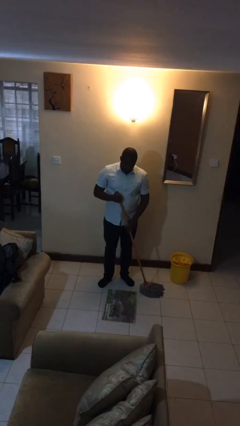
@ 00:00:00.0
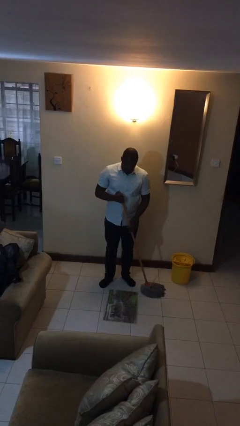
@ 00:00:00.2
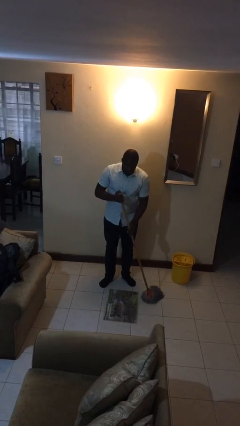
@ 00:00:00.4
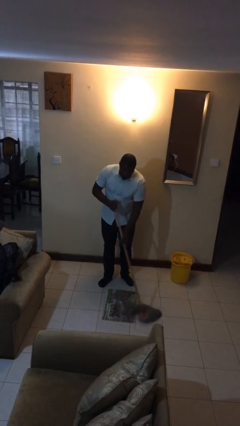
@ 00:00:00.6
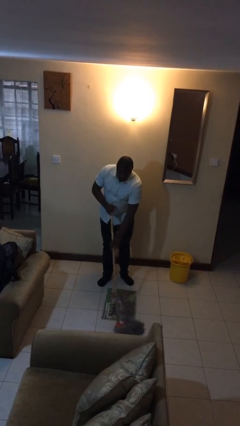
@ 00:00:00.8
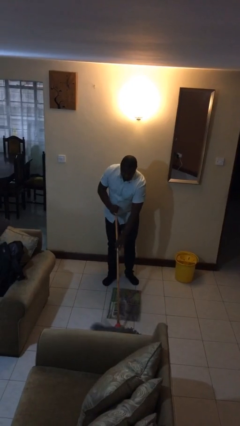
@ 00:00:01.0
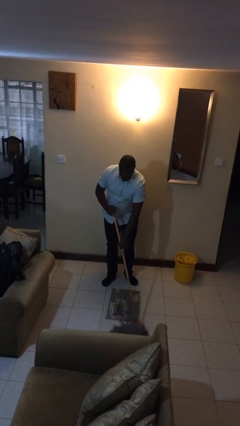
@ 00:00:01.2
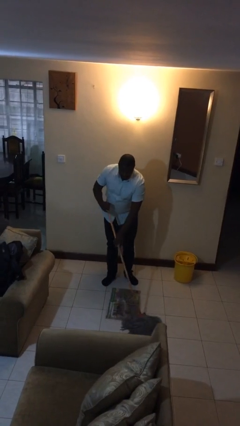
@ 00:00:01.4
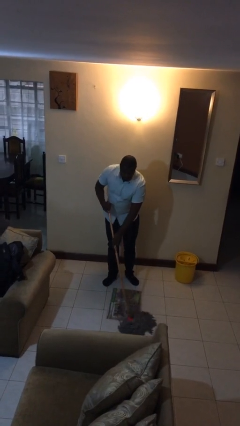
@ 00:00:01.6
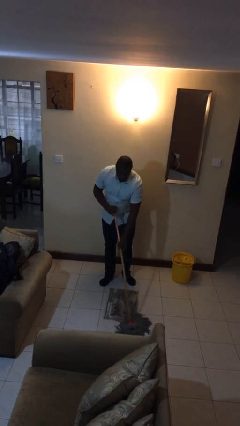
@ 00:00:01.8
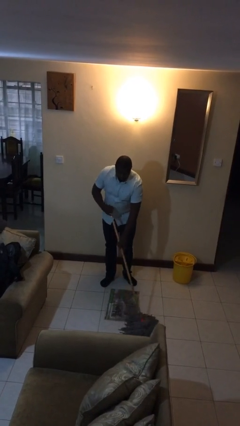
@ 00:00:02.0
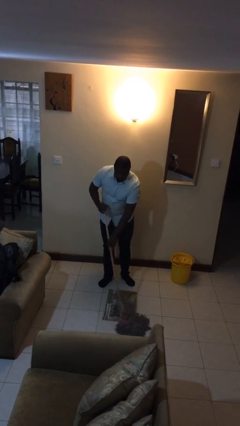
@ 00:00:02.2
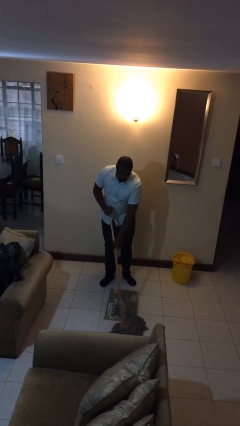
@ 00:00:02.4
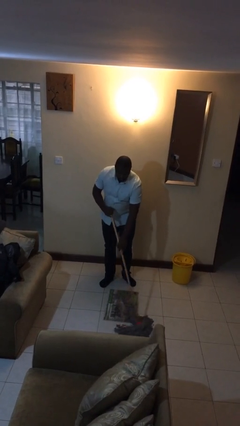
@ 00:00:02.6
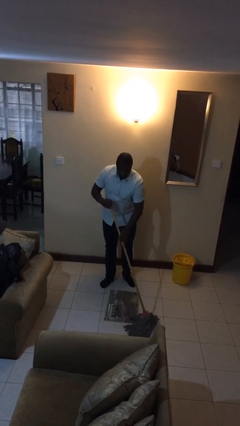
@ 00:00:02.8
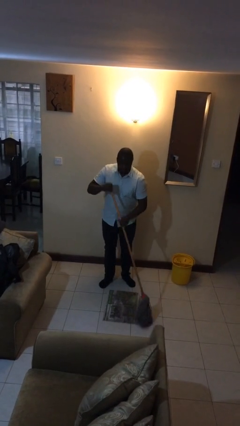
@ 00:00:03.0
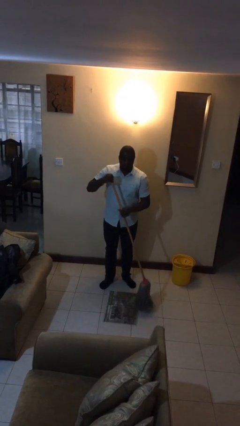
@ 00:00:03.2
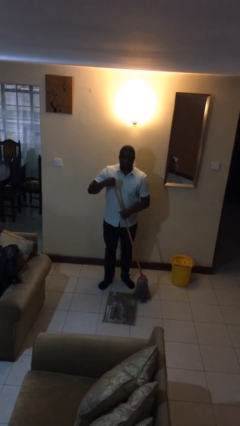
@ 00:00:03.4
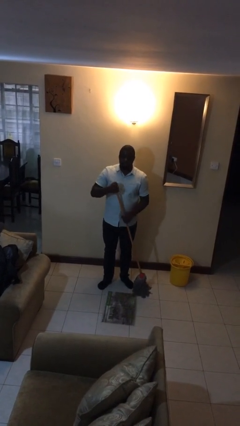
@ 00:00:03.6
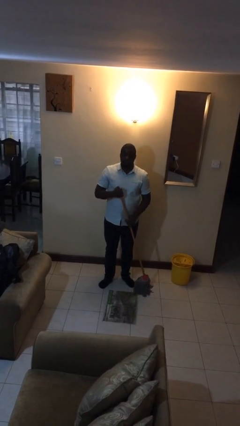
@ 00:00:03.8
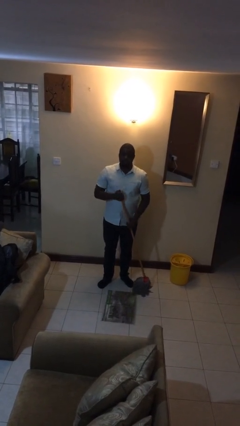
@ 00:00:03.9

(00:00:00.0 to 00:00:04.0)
person mops

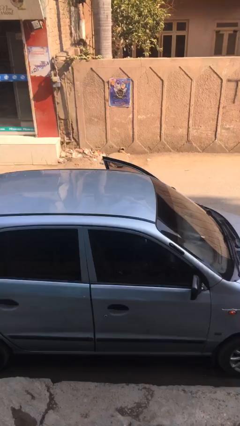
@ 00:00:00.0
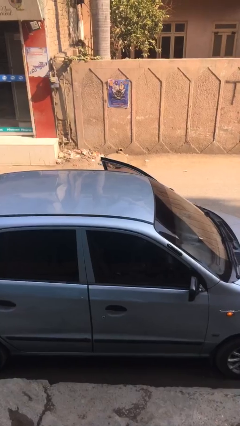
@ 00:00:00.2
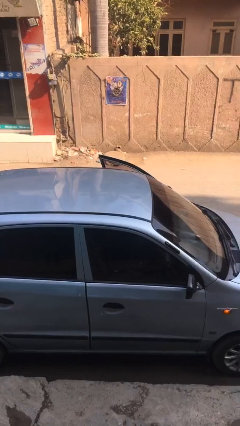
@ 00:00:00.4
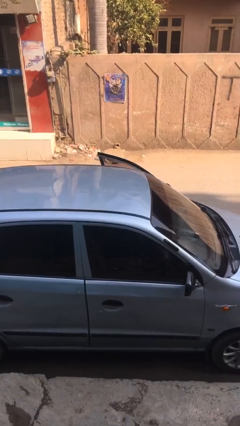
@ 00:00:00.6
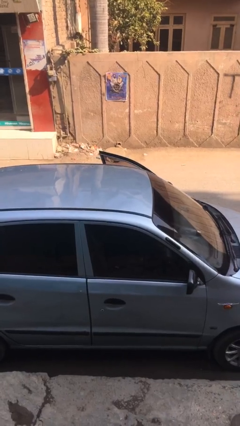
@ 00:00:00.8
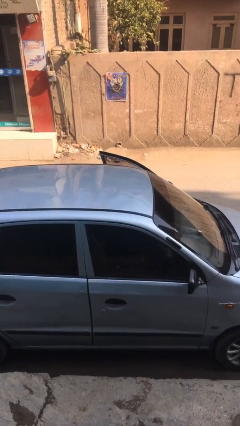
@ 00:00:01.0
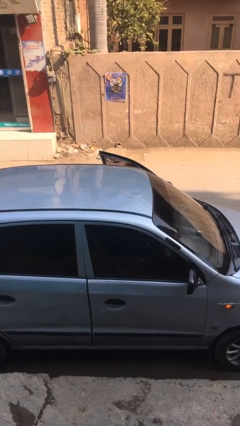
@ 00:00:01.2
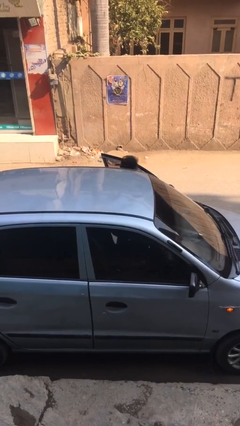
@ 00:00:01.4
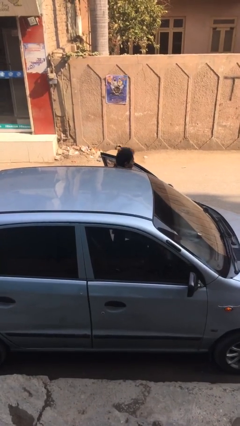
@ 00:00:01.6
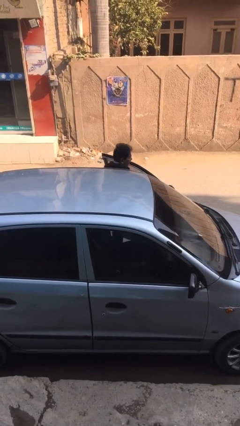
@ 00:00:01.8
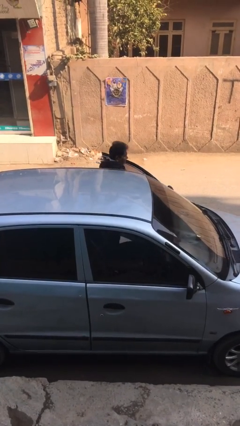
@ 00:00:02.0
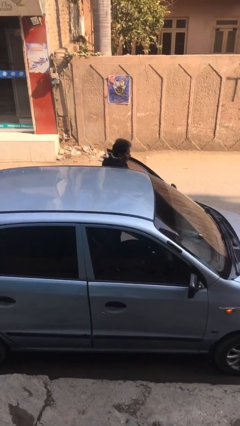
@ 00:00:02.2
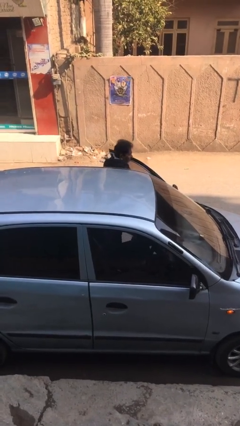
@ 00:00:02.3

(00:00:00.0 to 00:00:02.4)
person exits car

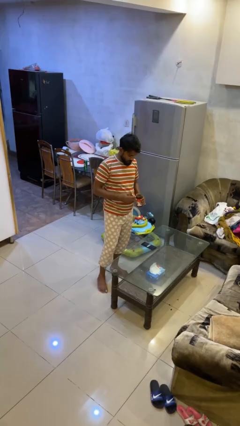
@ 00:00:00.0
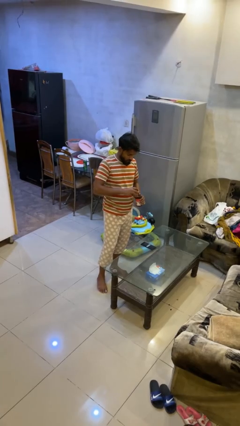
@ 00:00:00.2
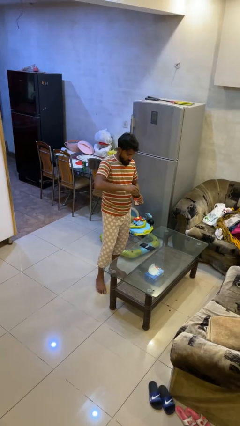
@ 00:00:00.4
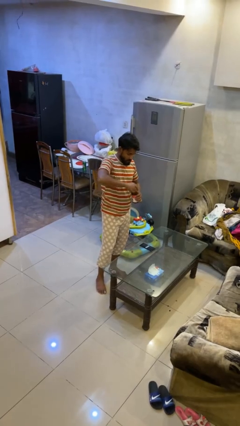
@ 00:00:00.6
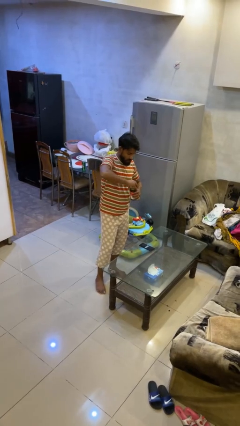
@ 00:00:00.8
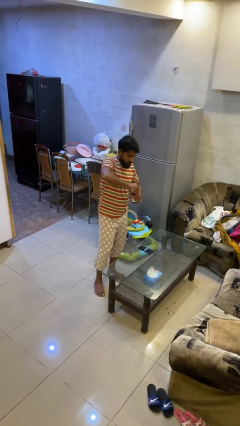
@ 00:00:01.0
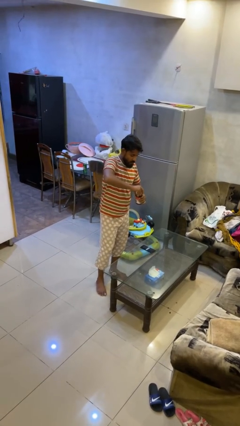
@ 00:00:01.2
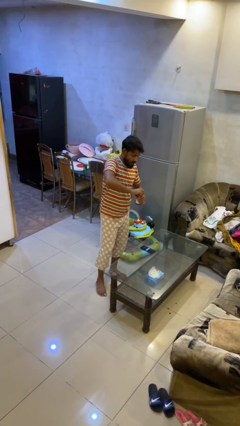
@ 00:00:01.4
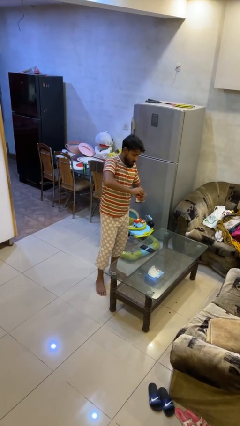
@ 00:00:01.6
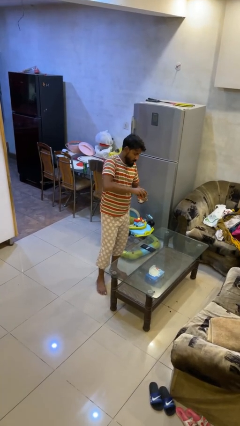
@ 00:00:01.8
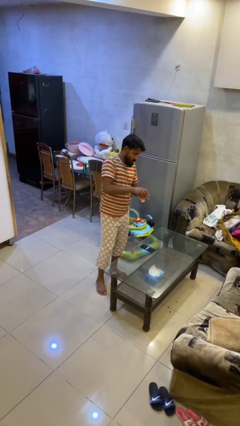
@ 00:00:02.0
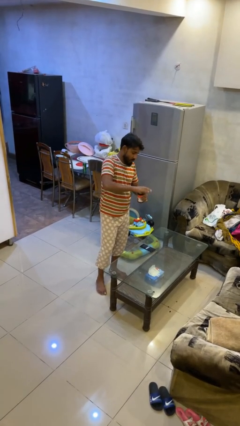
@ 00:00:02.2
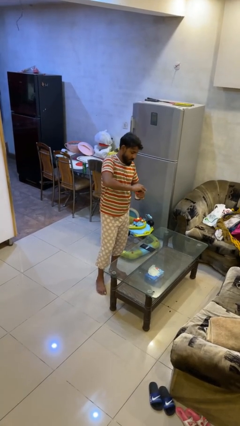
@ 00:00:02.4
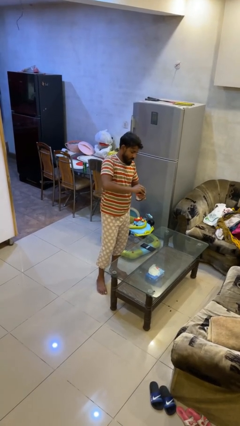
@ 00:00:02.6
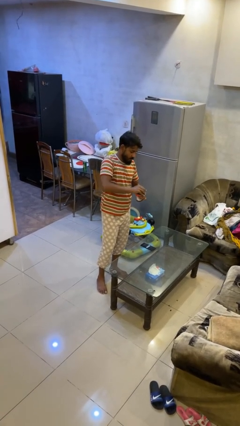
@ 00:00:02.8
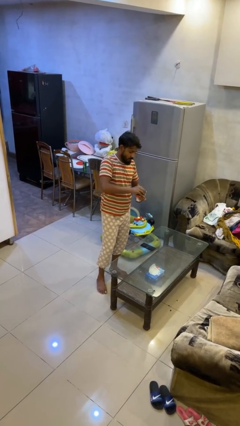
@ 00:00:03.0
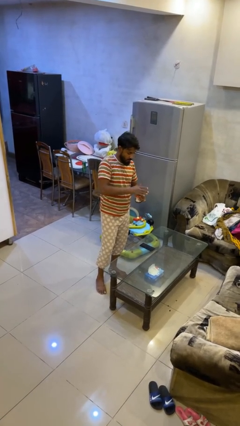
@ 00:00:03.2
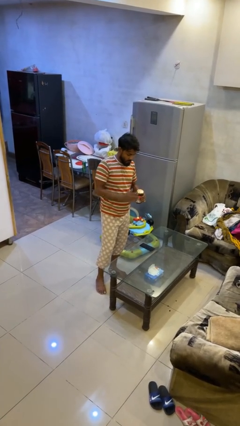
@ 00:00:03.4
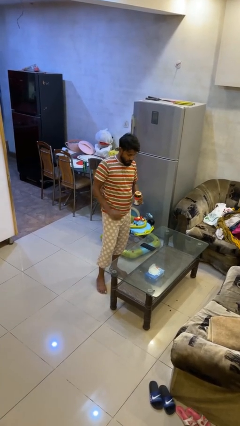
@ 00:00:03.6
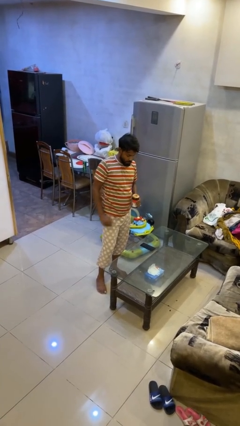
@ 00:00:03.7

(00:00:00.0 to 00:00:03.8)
person closes jar

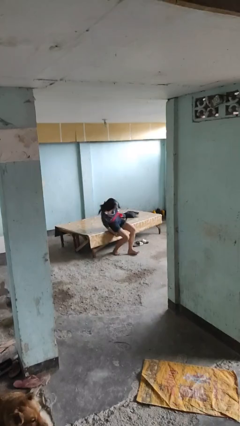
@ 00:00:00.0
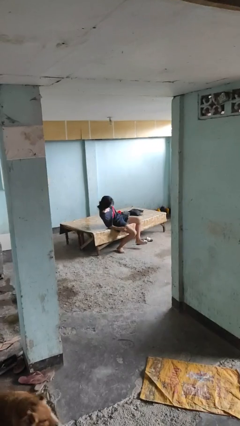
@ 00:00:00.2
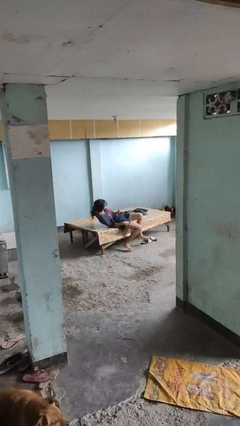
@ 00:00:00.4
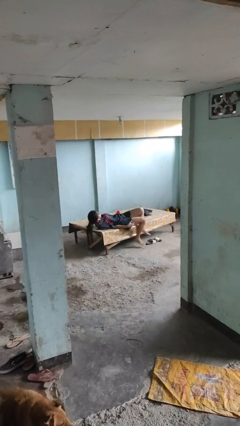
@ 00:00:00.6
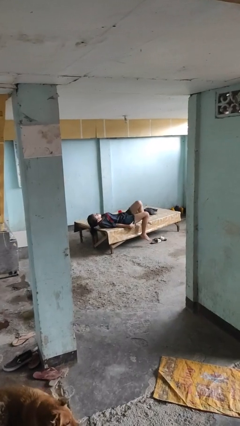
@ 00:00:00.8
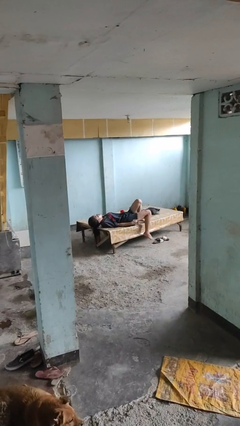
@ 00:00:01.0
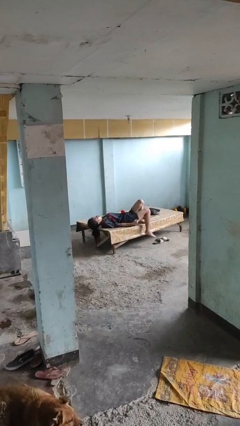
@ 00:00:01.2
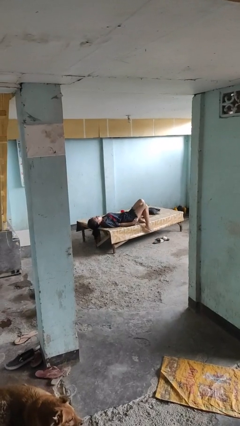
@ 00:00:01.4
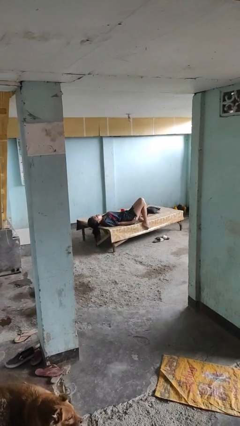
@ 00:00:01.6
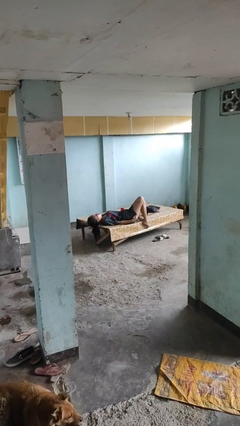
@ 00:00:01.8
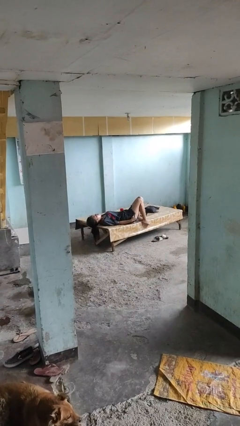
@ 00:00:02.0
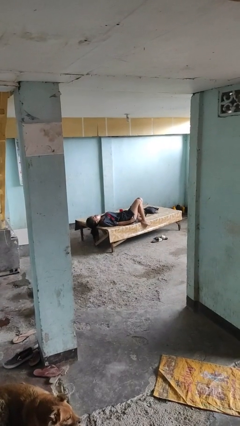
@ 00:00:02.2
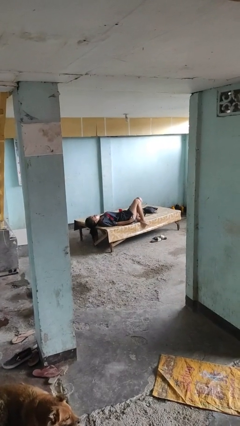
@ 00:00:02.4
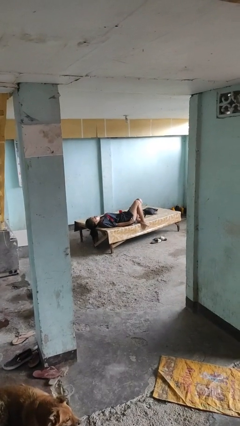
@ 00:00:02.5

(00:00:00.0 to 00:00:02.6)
person lies down on bed

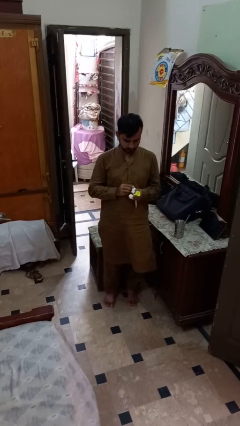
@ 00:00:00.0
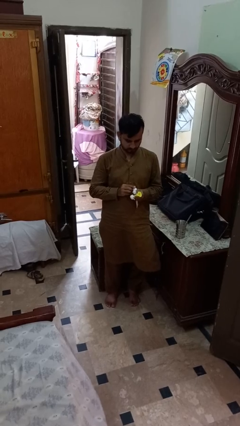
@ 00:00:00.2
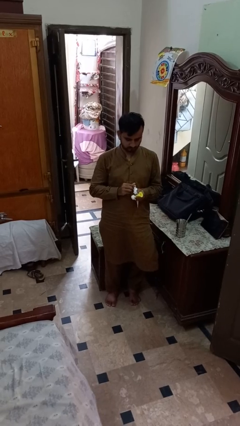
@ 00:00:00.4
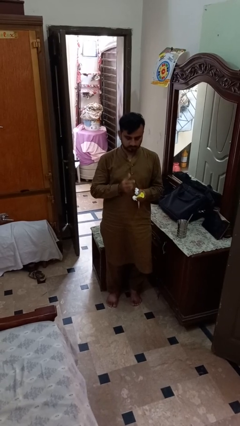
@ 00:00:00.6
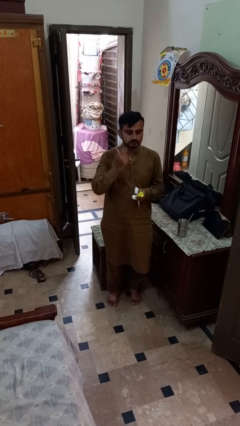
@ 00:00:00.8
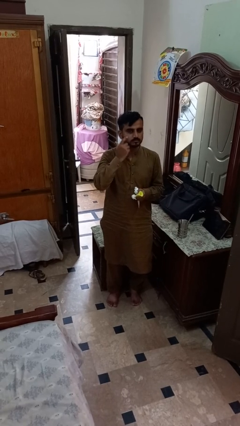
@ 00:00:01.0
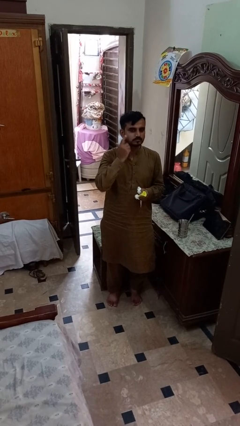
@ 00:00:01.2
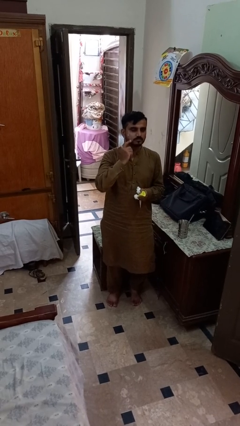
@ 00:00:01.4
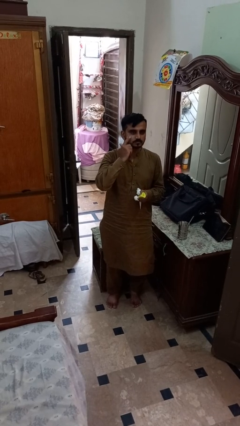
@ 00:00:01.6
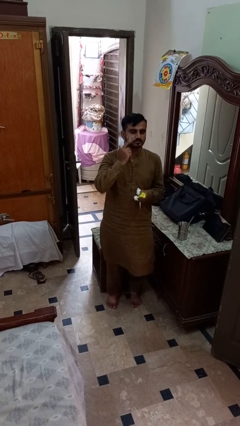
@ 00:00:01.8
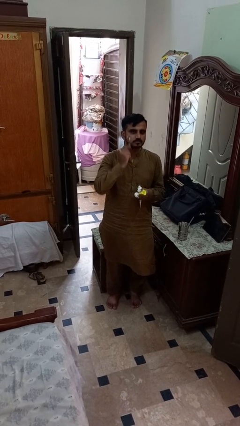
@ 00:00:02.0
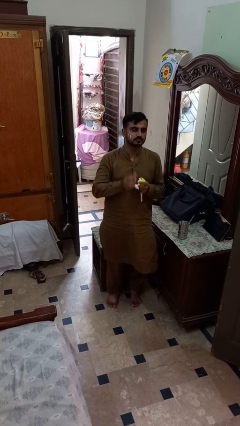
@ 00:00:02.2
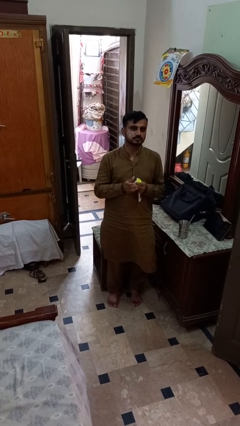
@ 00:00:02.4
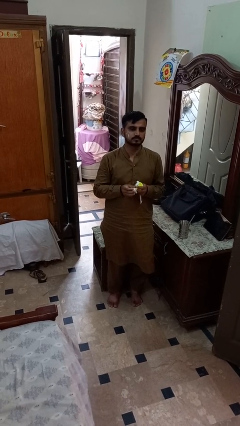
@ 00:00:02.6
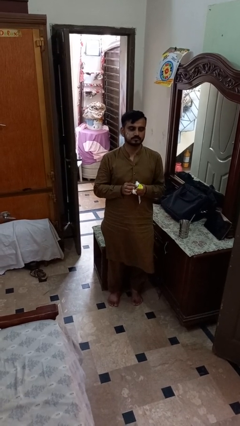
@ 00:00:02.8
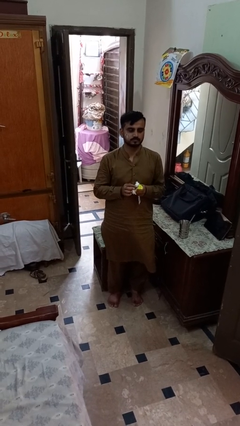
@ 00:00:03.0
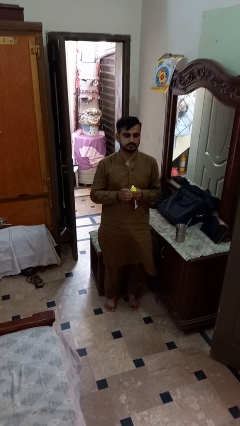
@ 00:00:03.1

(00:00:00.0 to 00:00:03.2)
person applies shaving cream

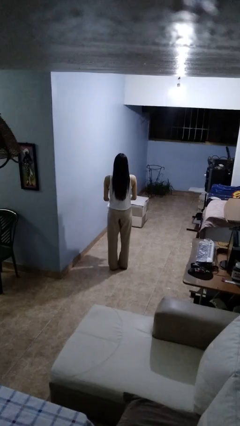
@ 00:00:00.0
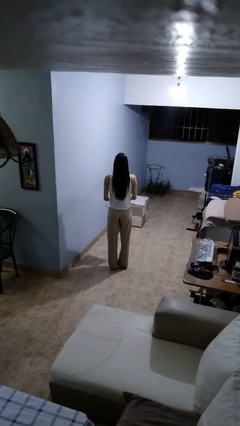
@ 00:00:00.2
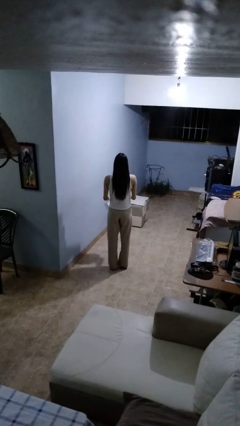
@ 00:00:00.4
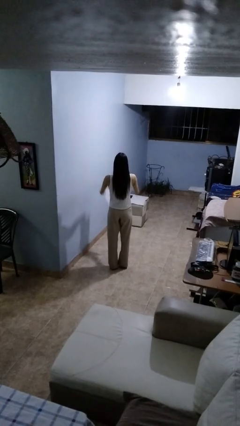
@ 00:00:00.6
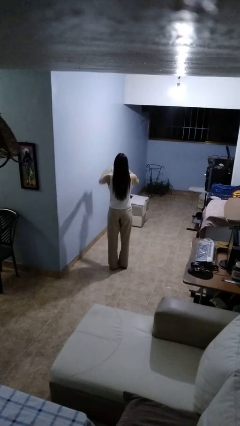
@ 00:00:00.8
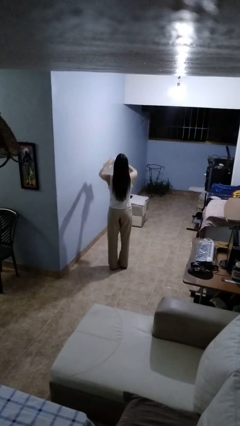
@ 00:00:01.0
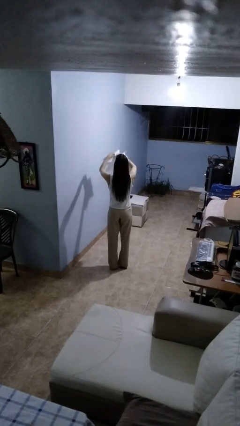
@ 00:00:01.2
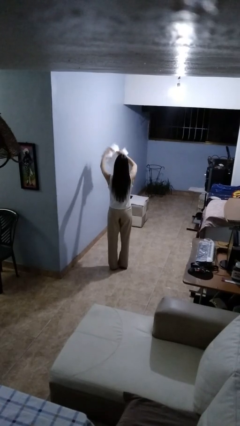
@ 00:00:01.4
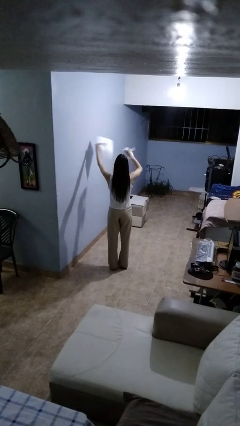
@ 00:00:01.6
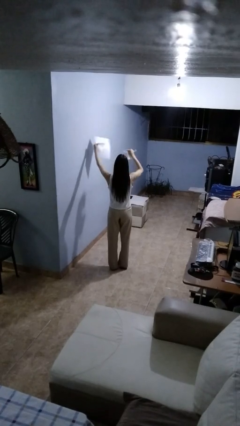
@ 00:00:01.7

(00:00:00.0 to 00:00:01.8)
person tears paper
